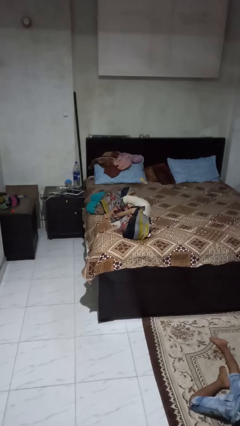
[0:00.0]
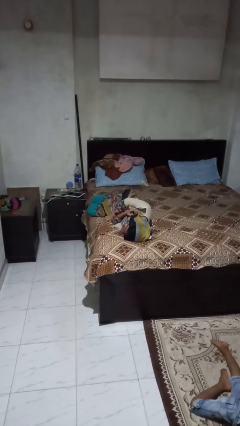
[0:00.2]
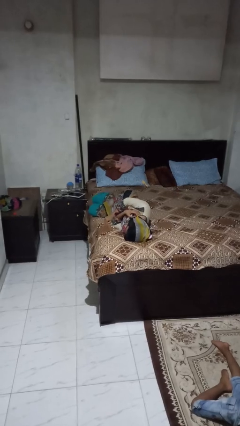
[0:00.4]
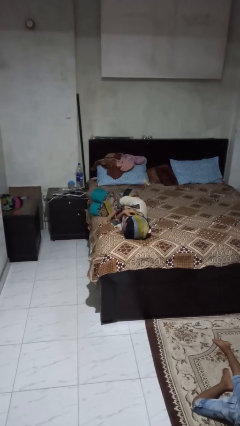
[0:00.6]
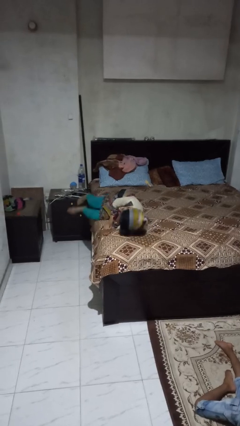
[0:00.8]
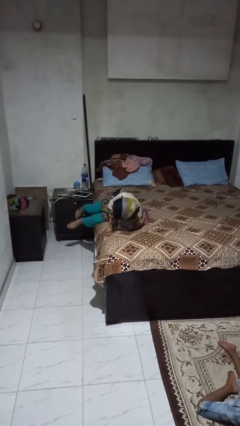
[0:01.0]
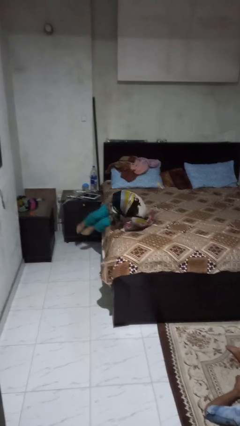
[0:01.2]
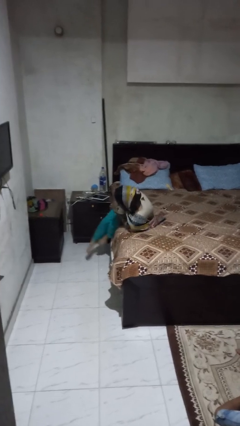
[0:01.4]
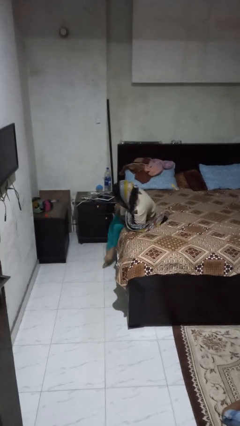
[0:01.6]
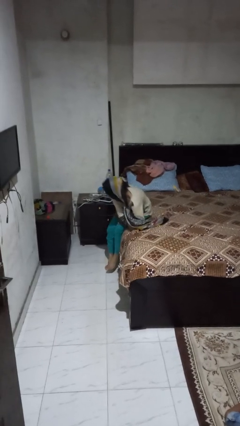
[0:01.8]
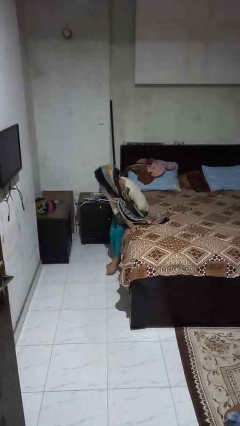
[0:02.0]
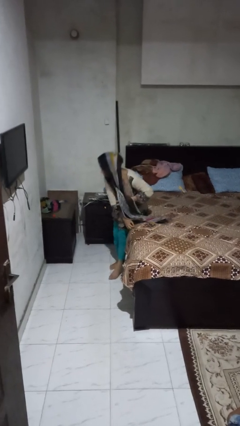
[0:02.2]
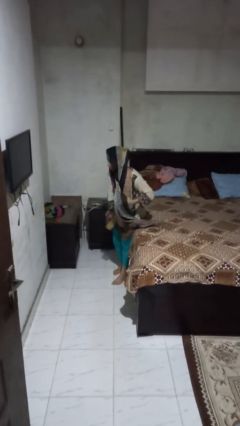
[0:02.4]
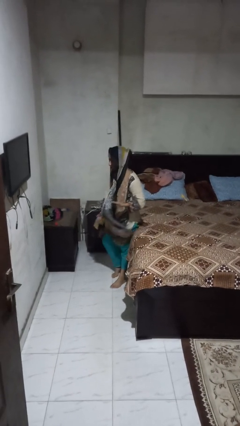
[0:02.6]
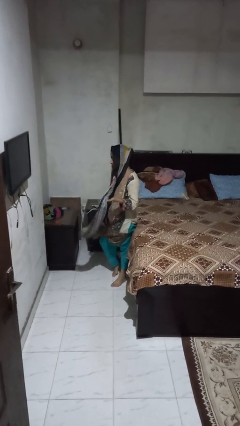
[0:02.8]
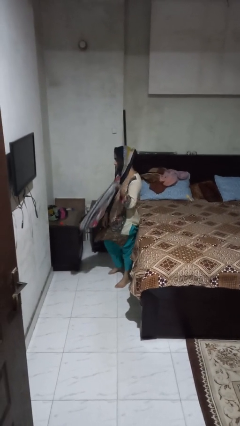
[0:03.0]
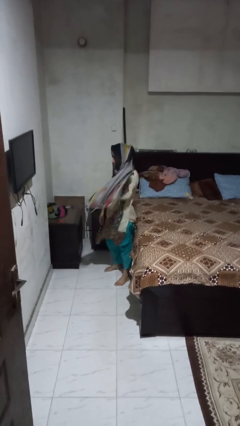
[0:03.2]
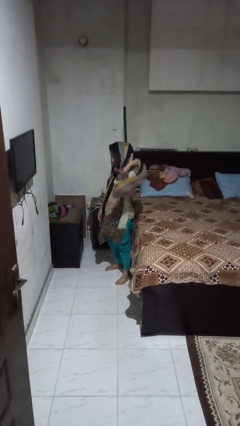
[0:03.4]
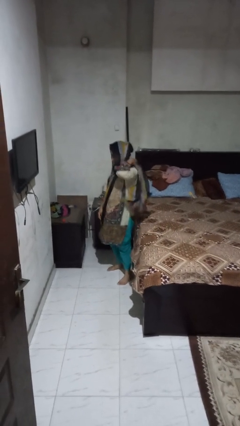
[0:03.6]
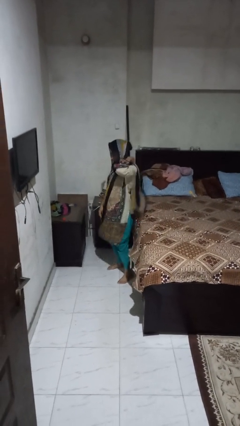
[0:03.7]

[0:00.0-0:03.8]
person stands up

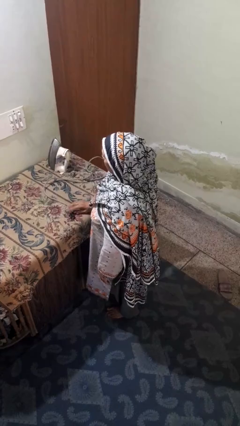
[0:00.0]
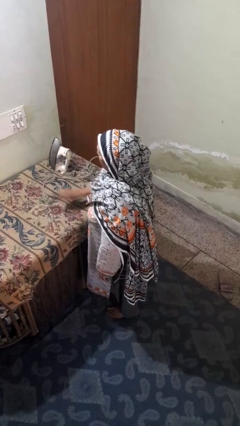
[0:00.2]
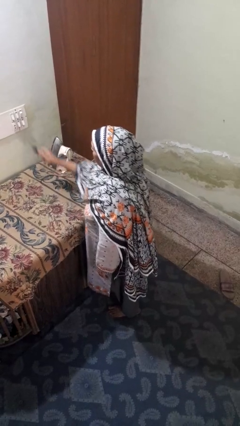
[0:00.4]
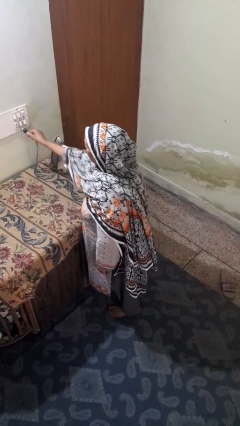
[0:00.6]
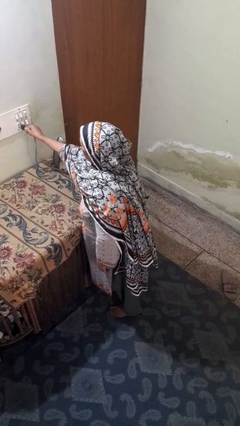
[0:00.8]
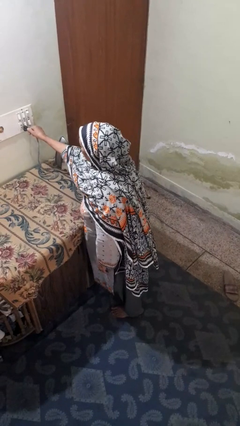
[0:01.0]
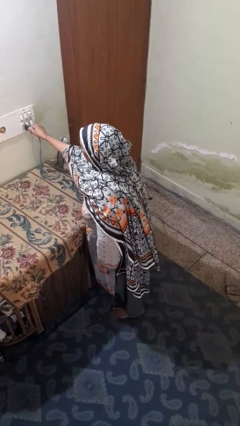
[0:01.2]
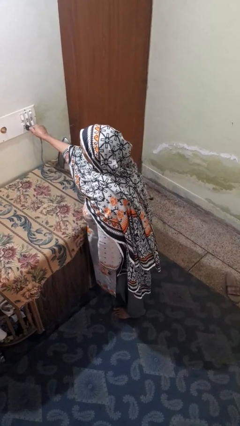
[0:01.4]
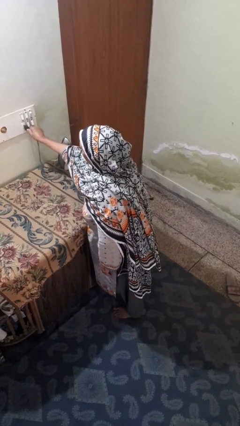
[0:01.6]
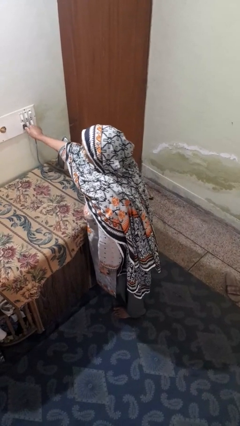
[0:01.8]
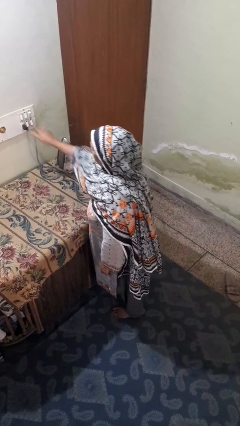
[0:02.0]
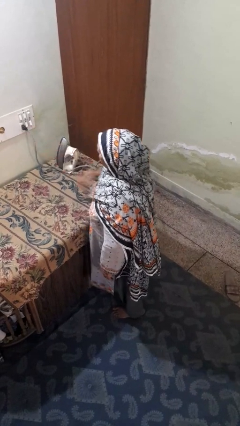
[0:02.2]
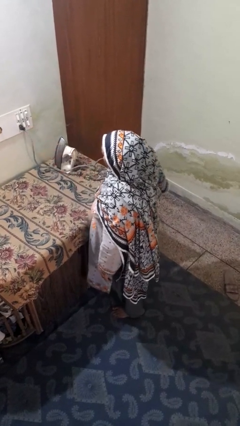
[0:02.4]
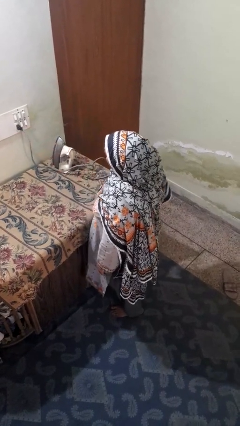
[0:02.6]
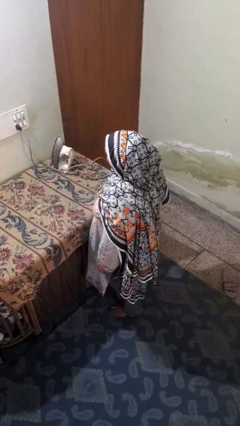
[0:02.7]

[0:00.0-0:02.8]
person plugs into electrical socket

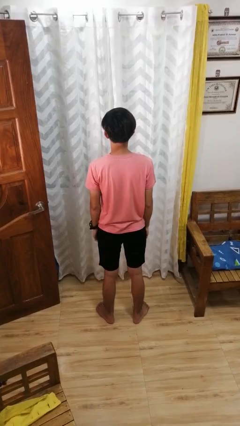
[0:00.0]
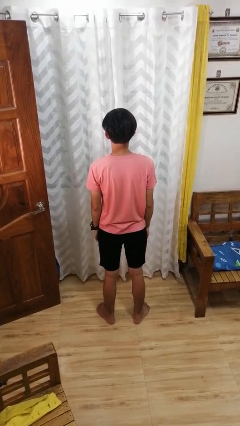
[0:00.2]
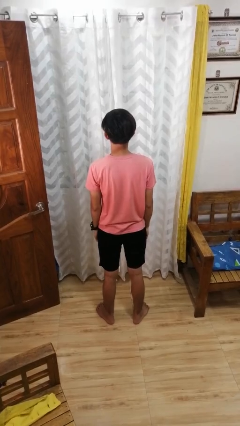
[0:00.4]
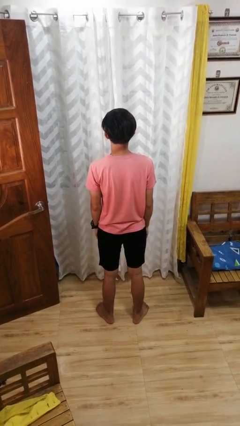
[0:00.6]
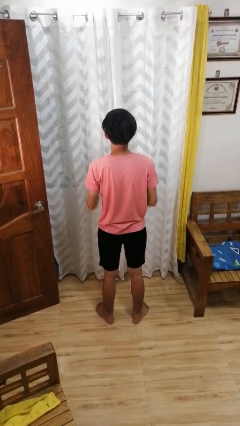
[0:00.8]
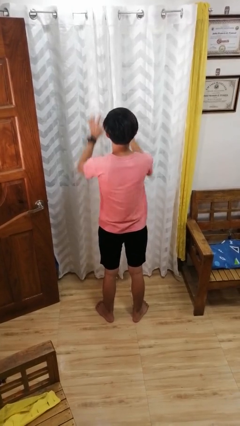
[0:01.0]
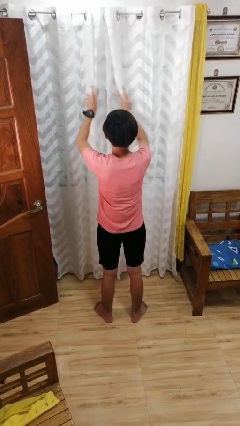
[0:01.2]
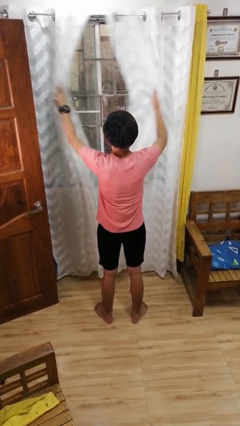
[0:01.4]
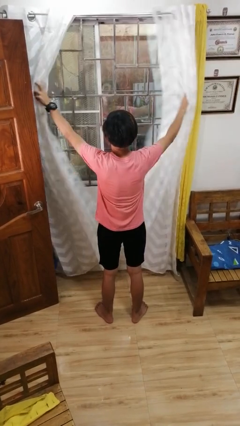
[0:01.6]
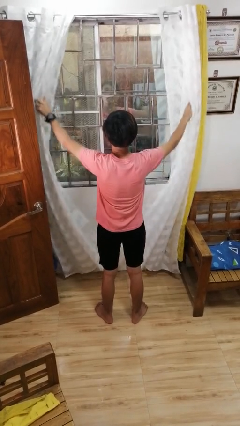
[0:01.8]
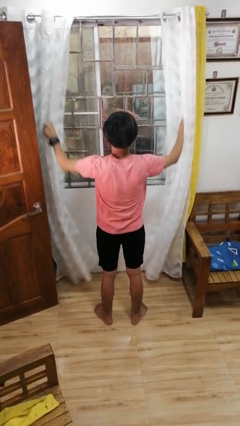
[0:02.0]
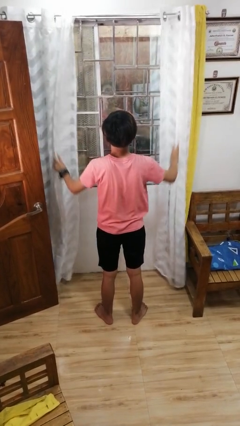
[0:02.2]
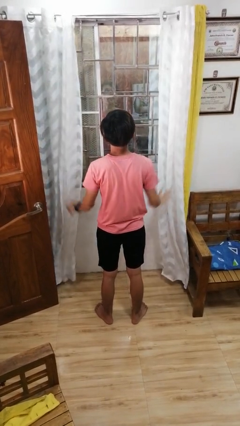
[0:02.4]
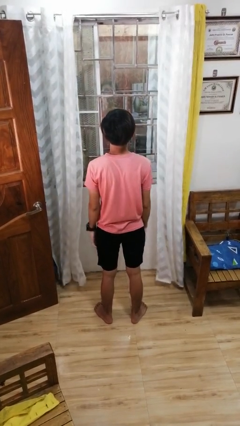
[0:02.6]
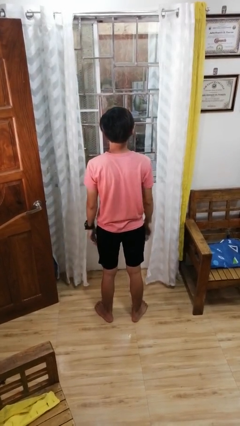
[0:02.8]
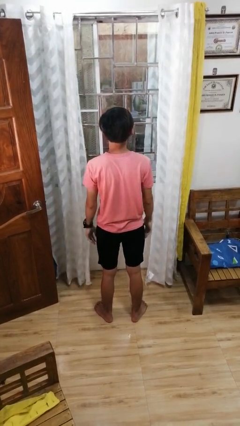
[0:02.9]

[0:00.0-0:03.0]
person opens curtains

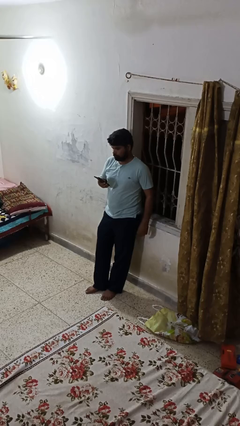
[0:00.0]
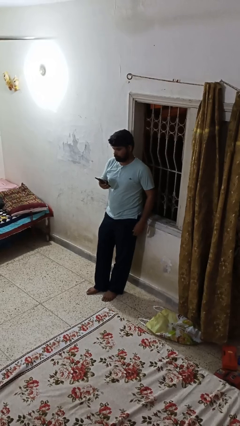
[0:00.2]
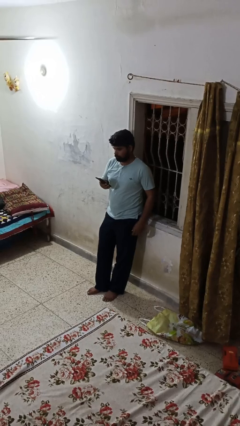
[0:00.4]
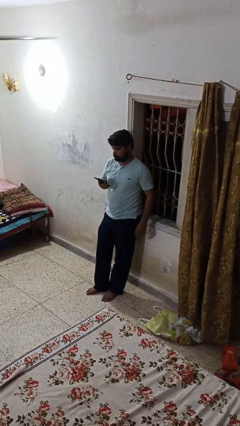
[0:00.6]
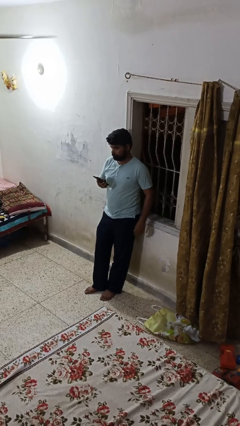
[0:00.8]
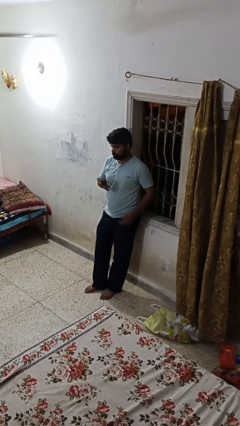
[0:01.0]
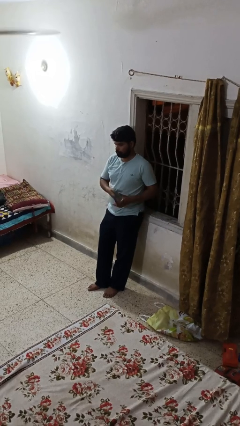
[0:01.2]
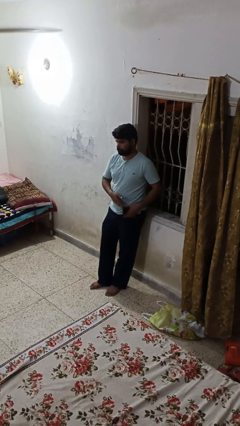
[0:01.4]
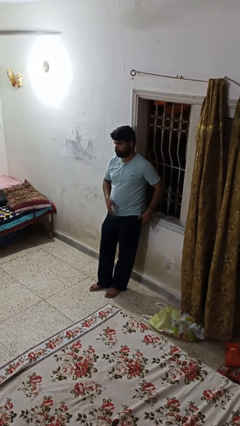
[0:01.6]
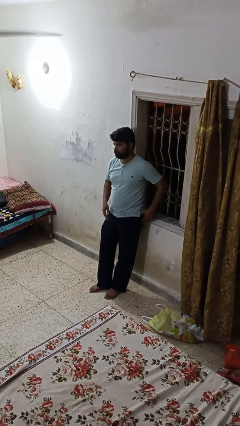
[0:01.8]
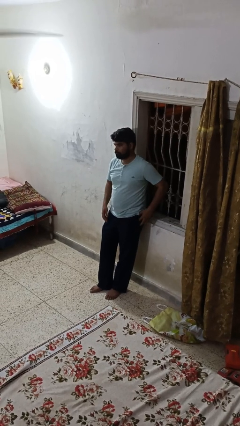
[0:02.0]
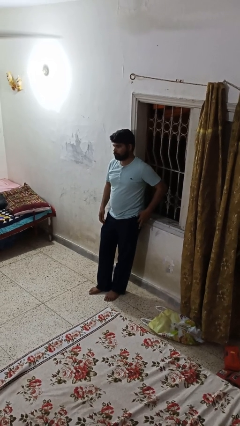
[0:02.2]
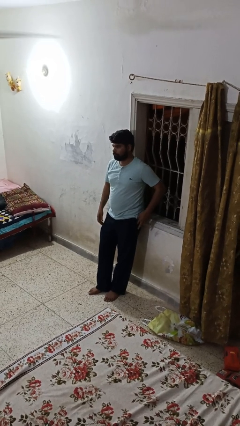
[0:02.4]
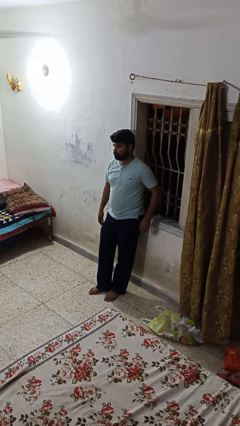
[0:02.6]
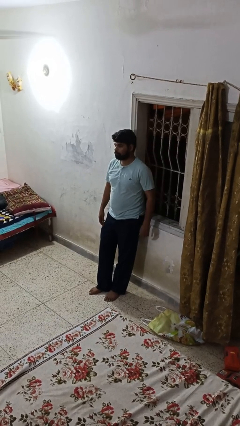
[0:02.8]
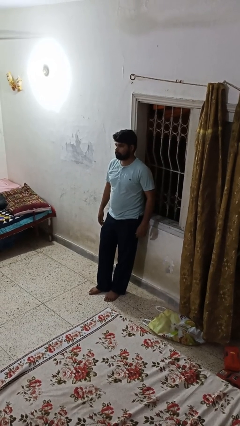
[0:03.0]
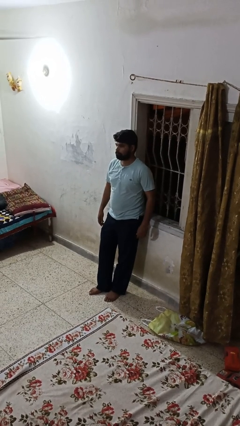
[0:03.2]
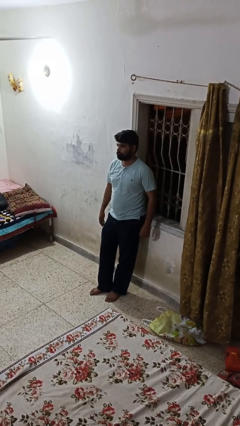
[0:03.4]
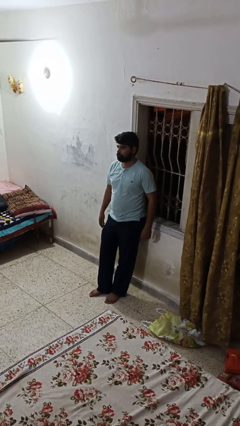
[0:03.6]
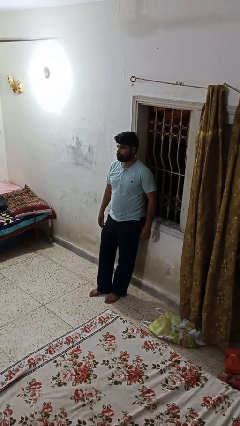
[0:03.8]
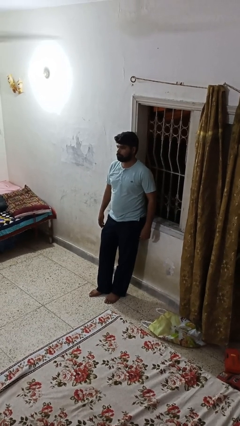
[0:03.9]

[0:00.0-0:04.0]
person puts phone into pocket

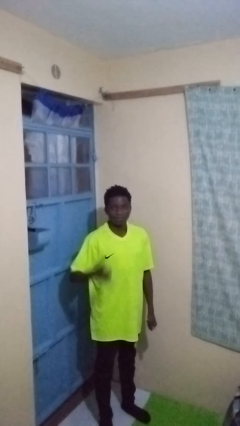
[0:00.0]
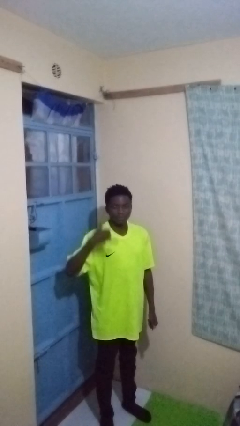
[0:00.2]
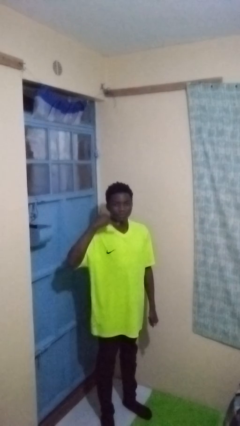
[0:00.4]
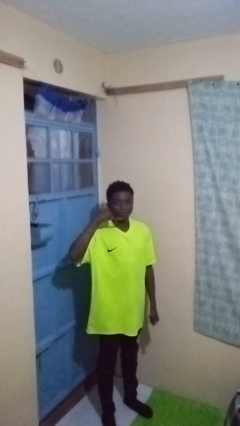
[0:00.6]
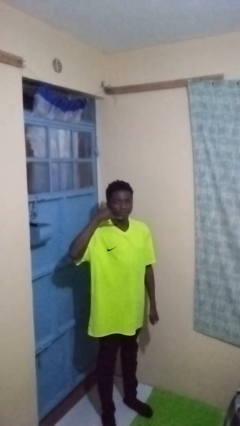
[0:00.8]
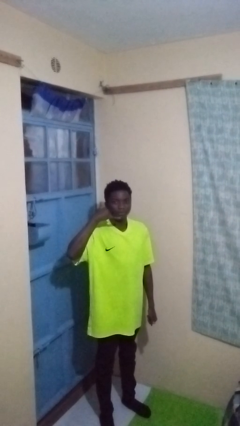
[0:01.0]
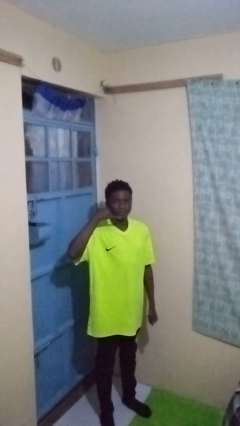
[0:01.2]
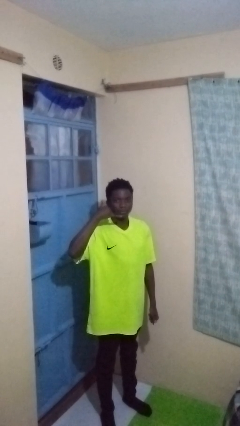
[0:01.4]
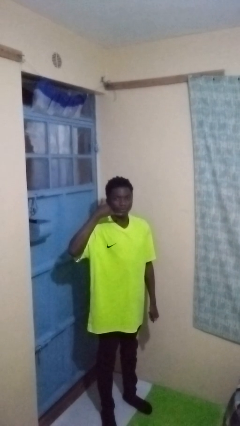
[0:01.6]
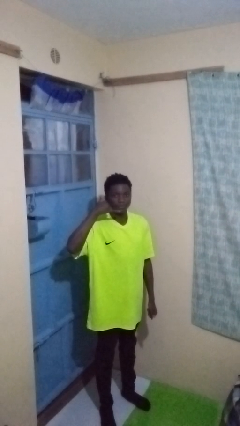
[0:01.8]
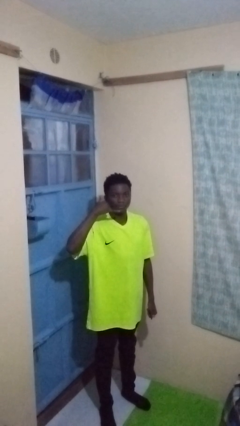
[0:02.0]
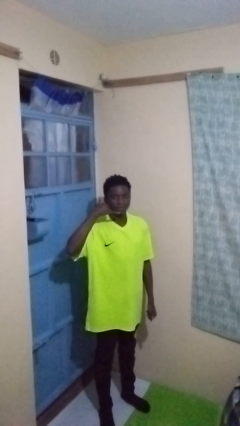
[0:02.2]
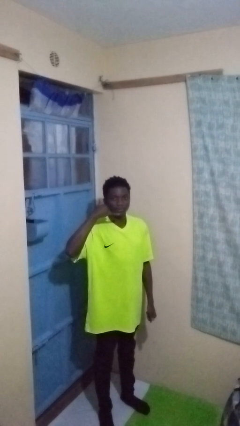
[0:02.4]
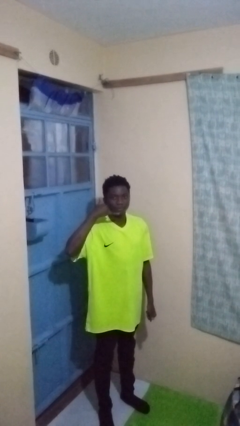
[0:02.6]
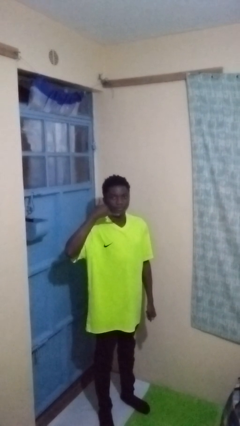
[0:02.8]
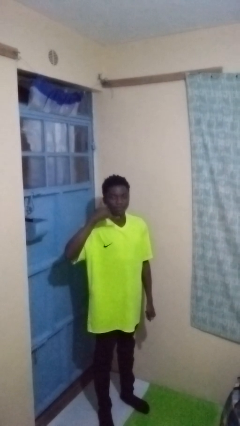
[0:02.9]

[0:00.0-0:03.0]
person gestures call me

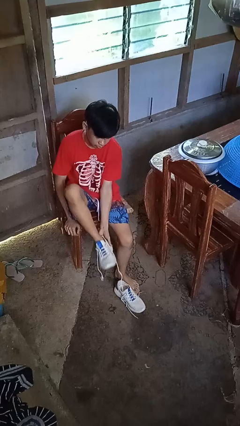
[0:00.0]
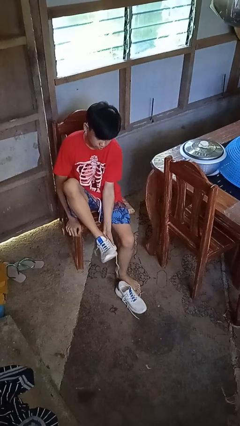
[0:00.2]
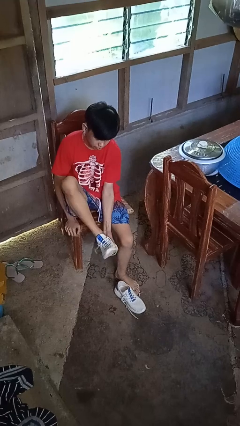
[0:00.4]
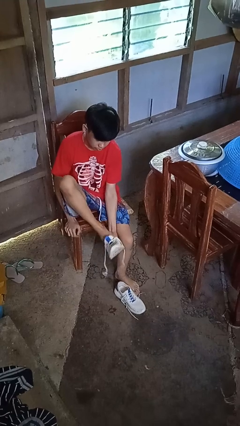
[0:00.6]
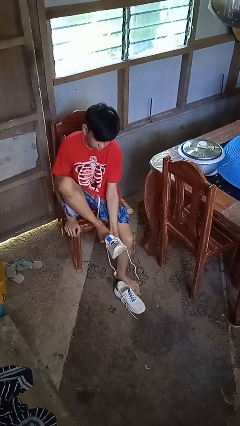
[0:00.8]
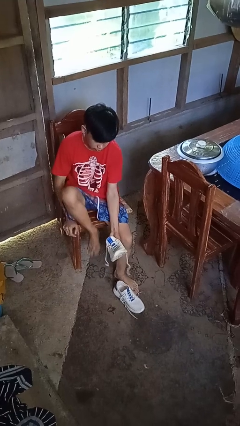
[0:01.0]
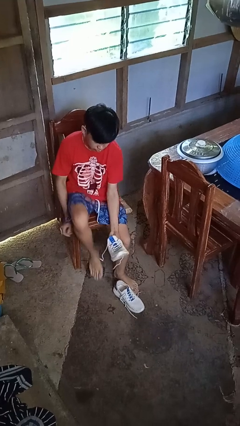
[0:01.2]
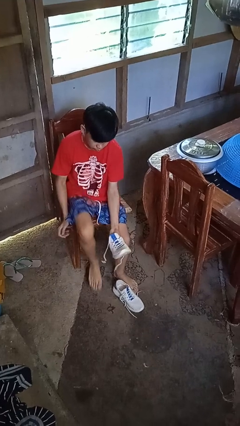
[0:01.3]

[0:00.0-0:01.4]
person takes off shoes
